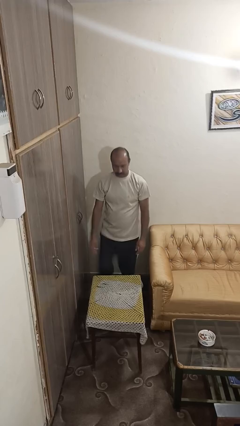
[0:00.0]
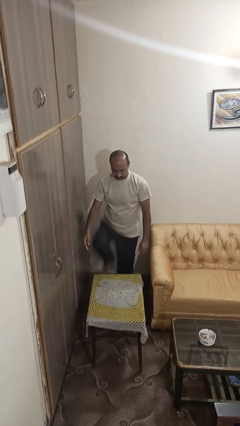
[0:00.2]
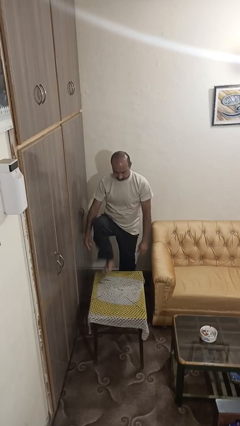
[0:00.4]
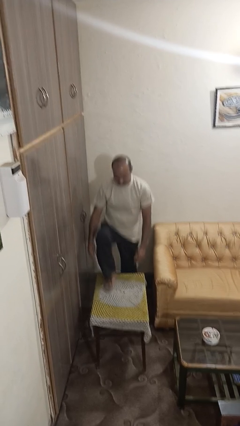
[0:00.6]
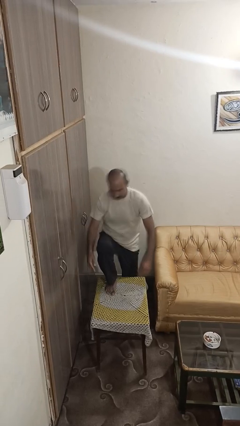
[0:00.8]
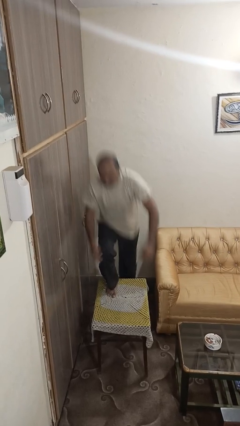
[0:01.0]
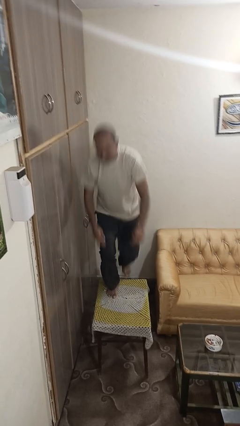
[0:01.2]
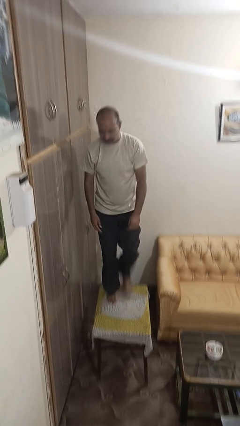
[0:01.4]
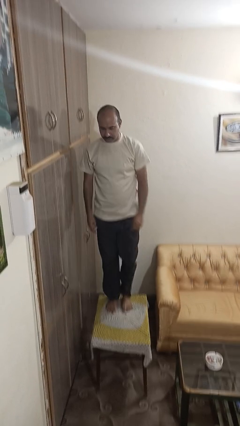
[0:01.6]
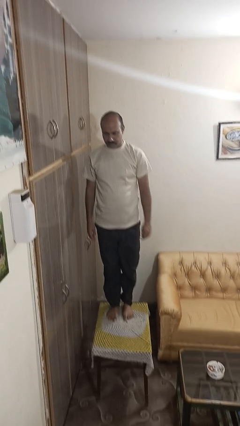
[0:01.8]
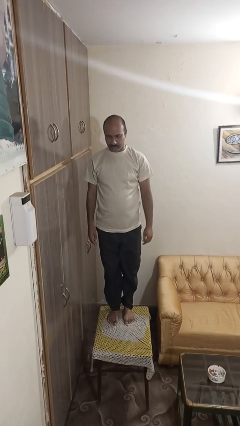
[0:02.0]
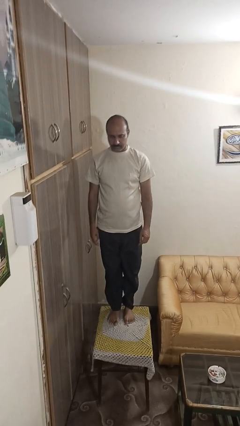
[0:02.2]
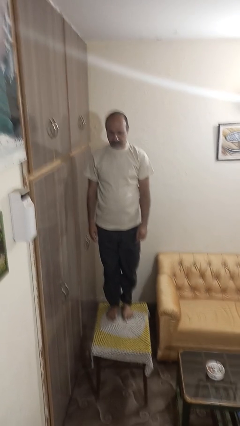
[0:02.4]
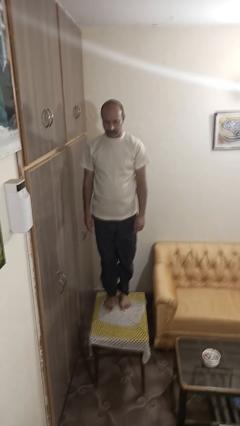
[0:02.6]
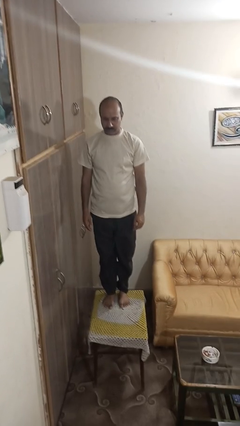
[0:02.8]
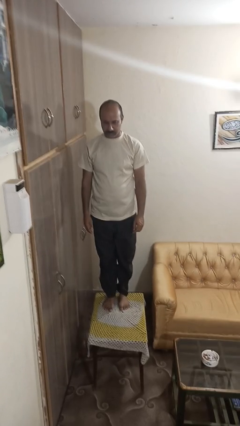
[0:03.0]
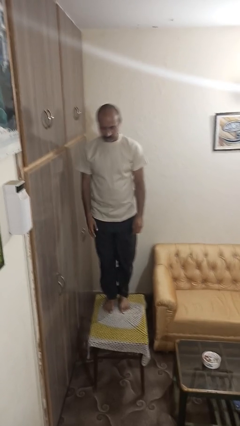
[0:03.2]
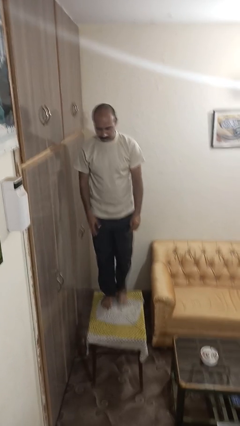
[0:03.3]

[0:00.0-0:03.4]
person climbs on table

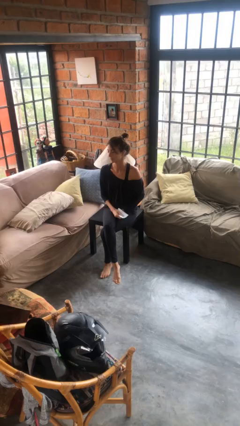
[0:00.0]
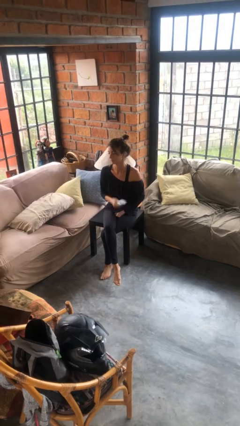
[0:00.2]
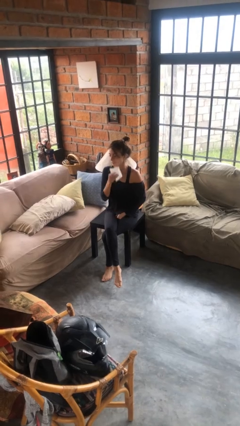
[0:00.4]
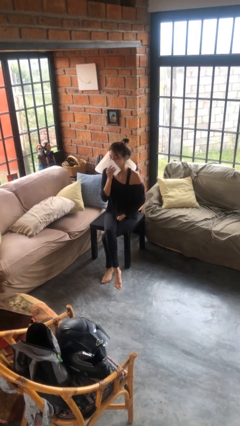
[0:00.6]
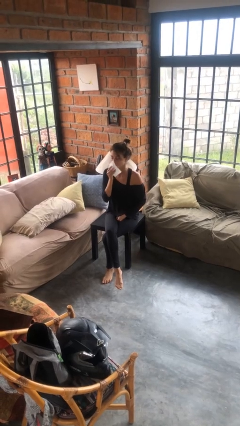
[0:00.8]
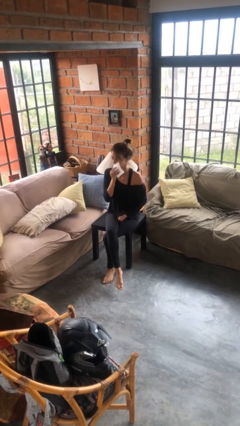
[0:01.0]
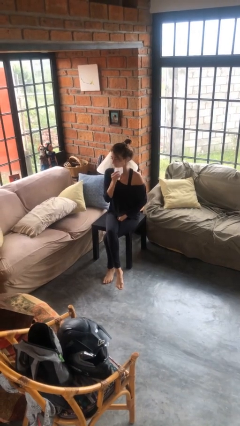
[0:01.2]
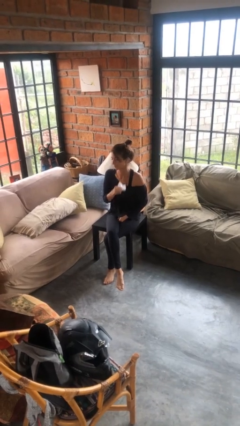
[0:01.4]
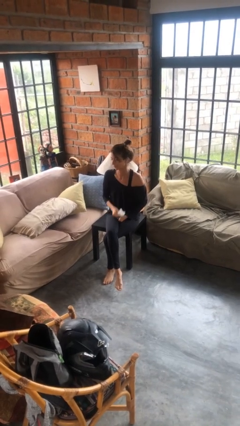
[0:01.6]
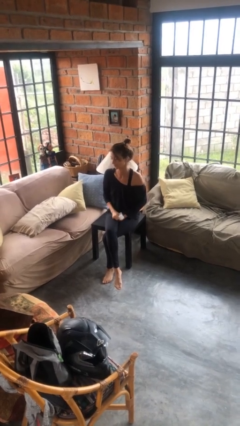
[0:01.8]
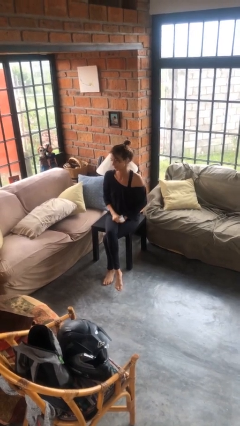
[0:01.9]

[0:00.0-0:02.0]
person wipes mouth with napkin

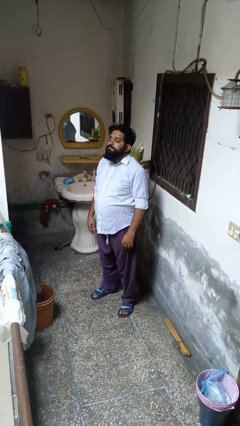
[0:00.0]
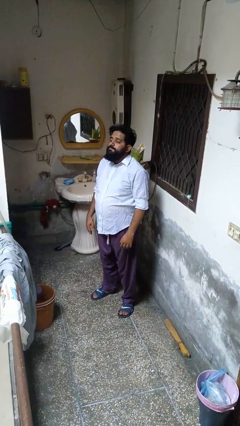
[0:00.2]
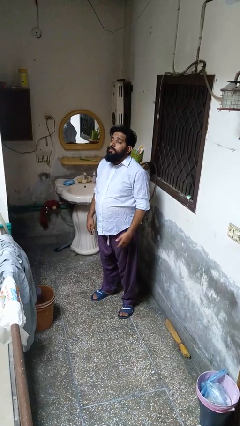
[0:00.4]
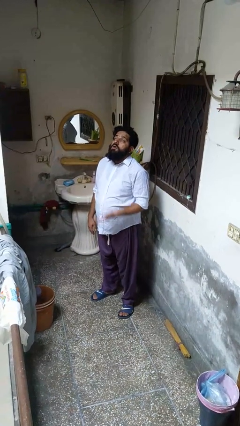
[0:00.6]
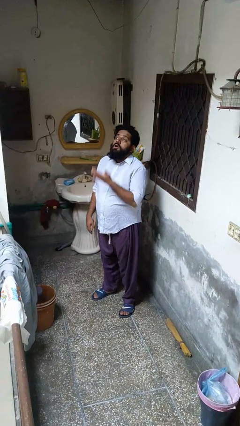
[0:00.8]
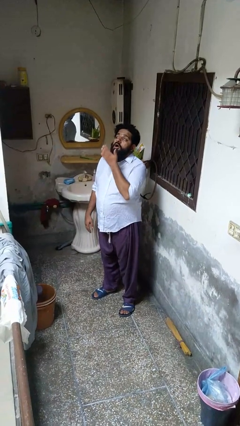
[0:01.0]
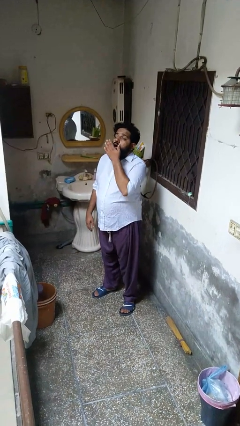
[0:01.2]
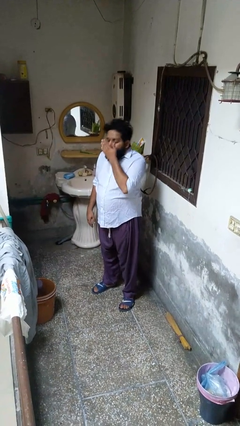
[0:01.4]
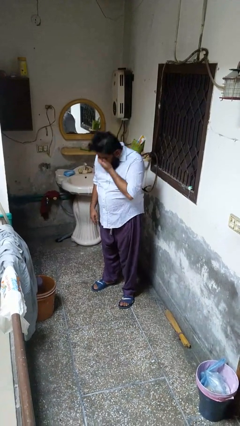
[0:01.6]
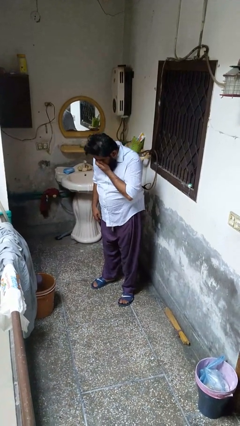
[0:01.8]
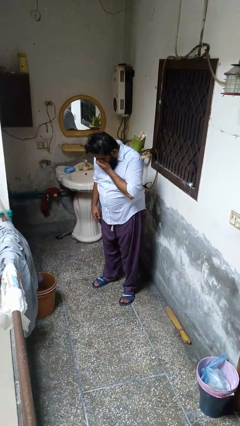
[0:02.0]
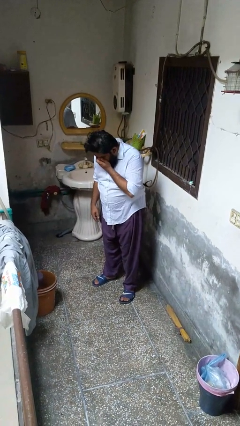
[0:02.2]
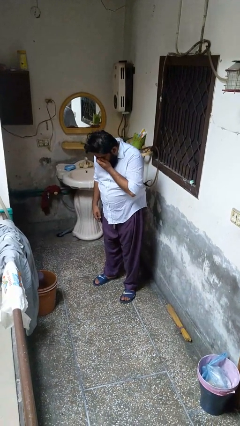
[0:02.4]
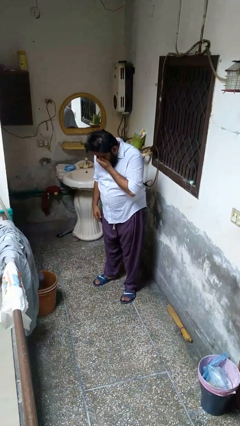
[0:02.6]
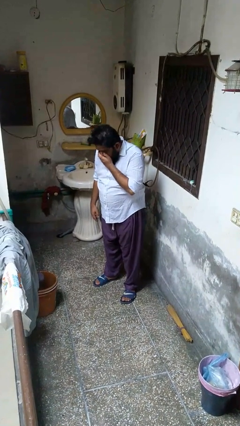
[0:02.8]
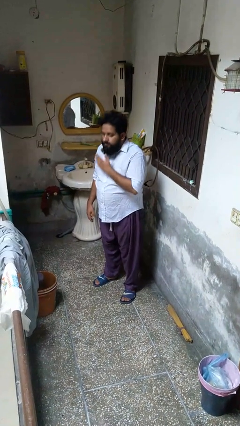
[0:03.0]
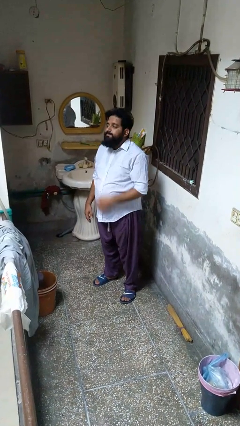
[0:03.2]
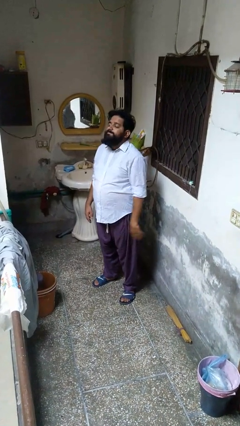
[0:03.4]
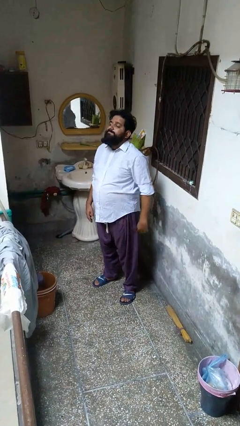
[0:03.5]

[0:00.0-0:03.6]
person sneezes into hand

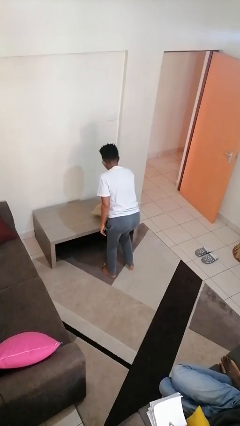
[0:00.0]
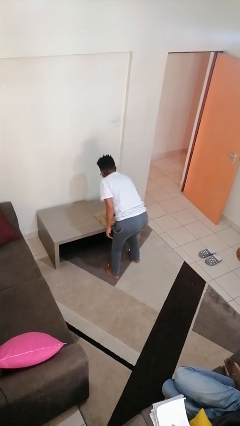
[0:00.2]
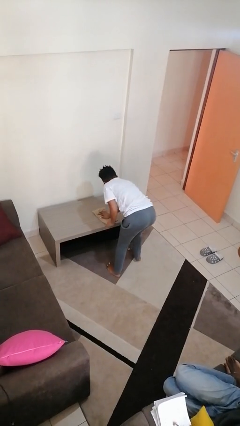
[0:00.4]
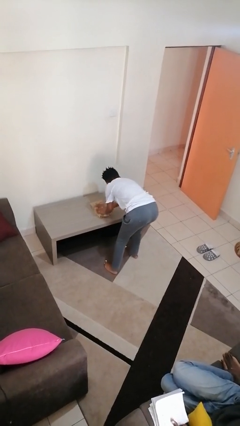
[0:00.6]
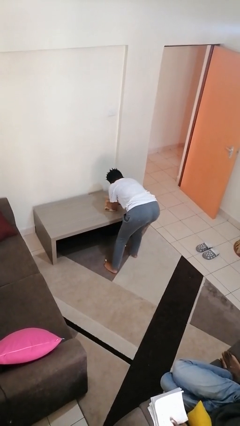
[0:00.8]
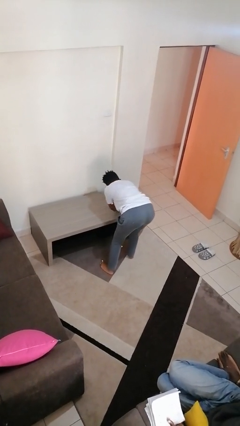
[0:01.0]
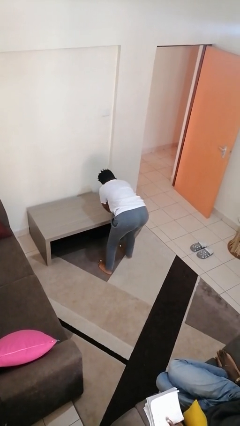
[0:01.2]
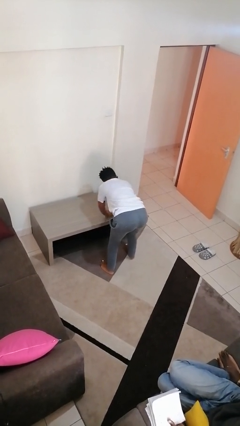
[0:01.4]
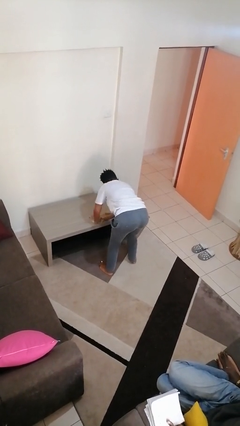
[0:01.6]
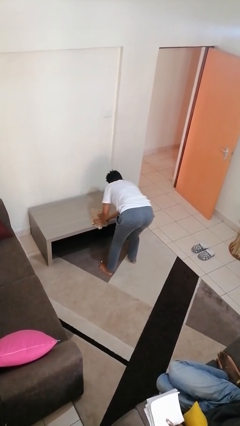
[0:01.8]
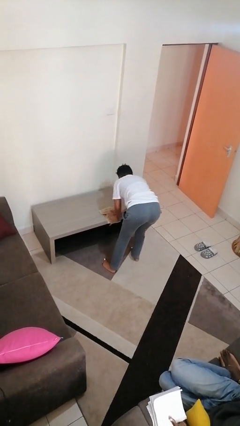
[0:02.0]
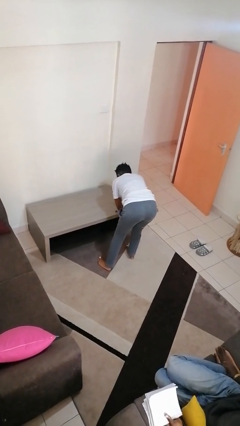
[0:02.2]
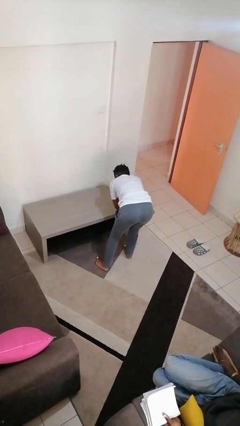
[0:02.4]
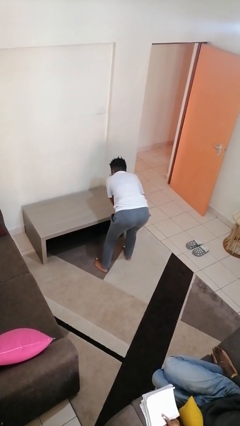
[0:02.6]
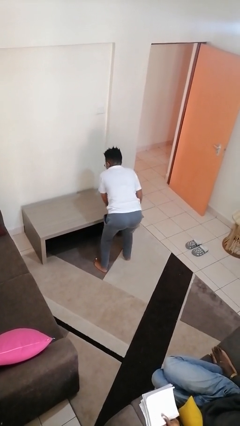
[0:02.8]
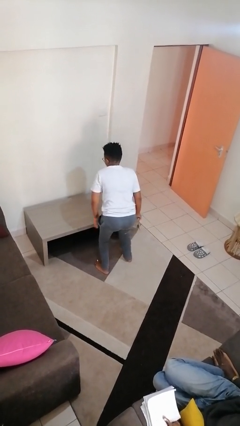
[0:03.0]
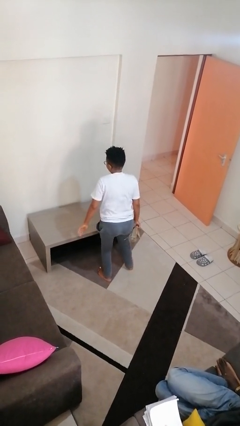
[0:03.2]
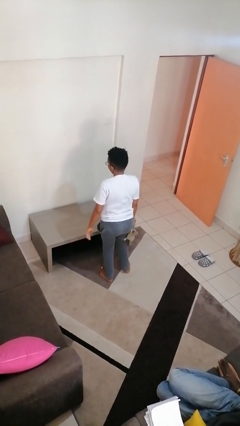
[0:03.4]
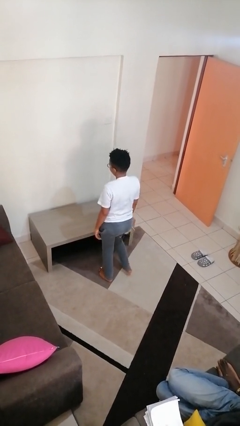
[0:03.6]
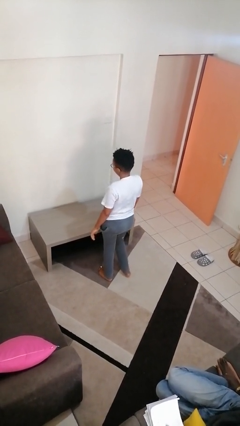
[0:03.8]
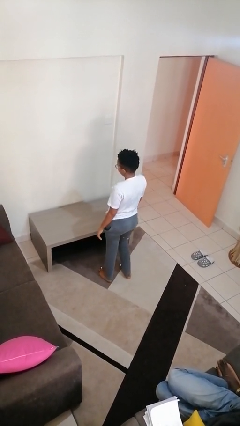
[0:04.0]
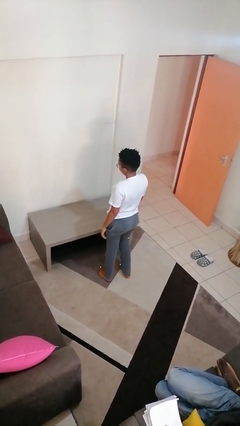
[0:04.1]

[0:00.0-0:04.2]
person cleans table with rag

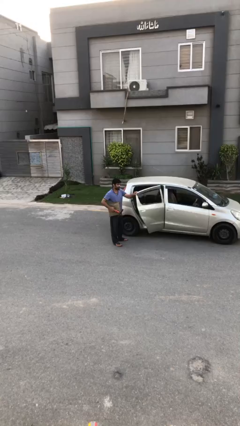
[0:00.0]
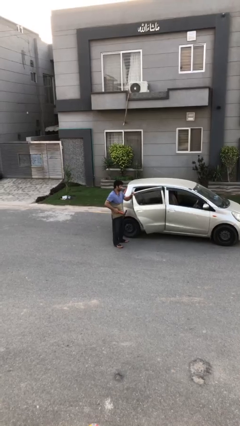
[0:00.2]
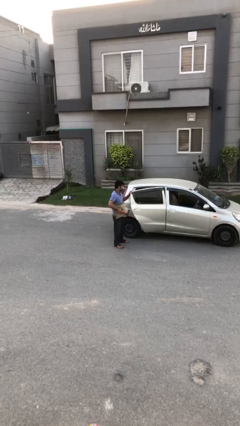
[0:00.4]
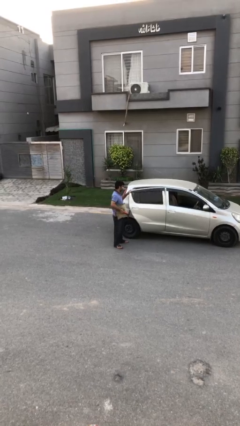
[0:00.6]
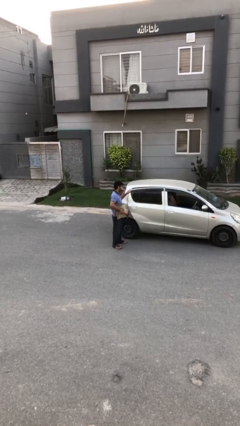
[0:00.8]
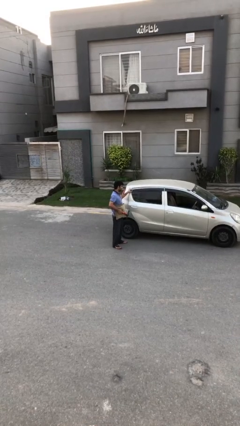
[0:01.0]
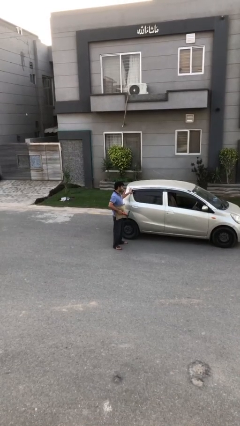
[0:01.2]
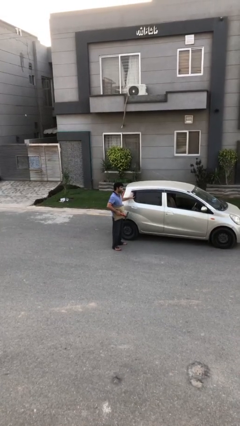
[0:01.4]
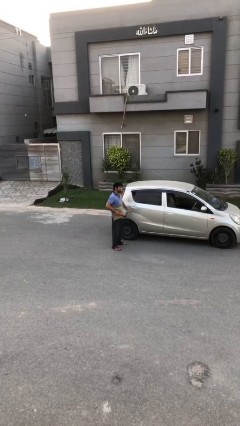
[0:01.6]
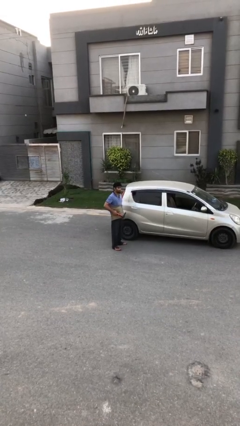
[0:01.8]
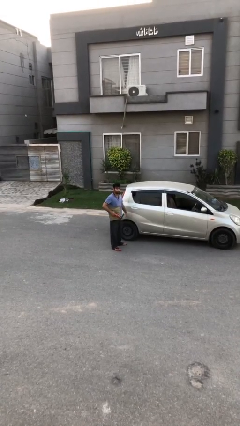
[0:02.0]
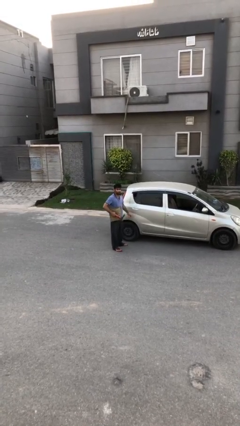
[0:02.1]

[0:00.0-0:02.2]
person closes car door

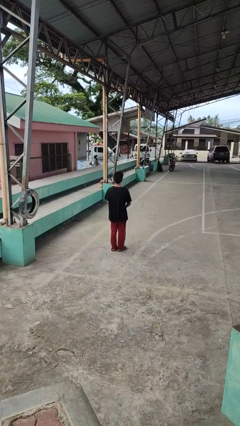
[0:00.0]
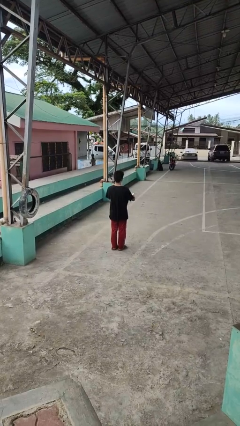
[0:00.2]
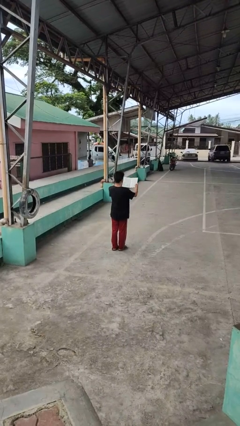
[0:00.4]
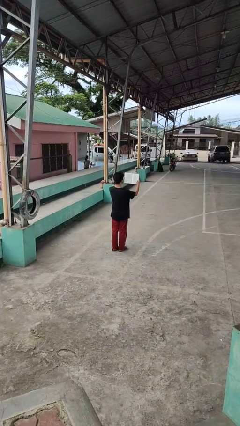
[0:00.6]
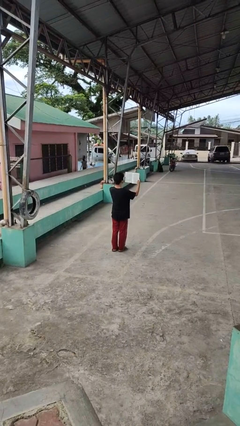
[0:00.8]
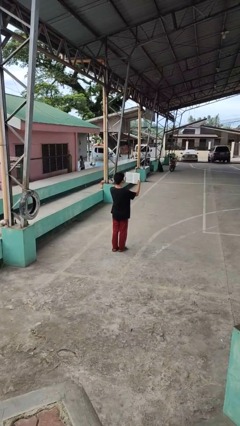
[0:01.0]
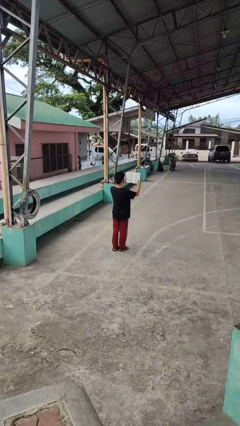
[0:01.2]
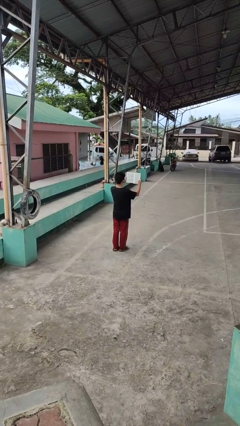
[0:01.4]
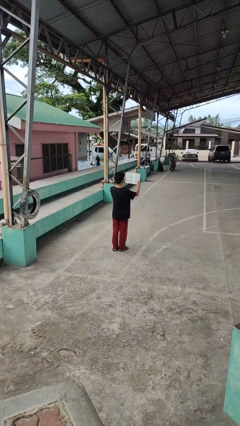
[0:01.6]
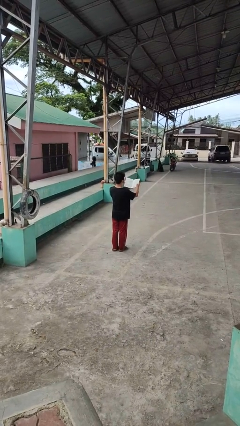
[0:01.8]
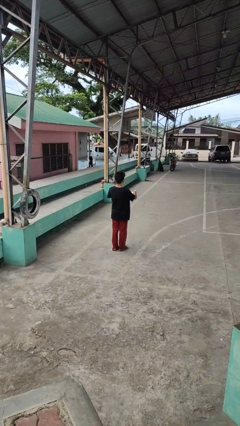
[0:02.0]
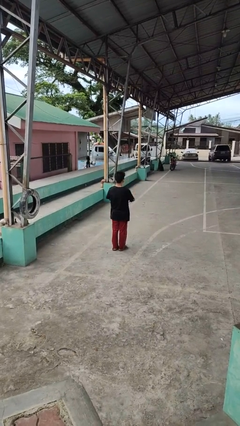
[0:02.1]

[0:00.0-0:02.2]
person reads book
